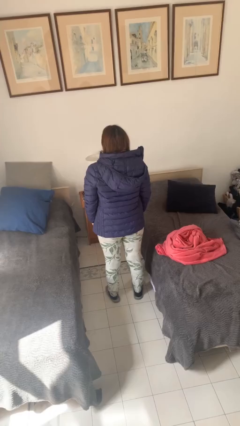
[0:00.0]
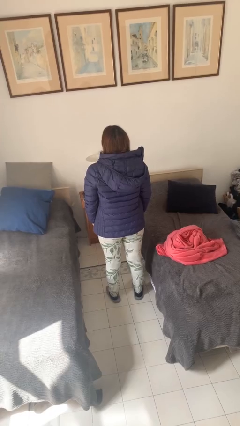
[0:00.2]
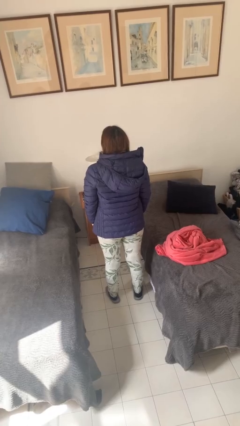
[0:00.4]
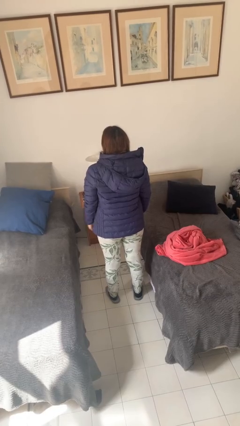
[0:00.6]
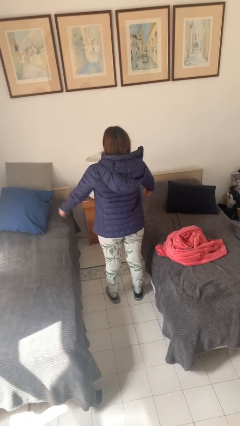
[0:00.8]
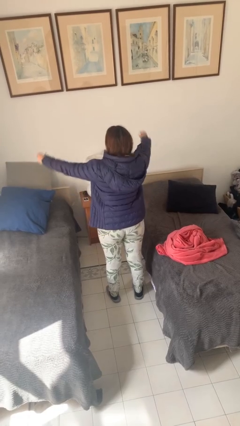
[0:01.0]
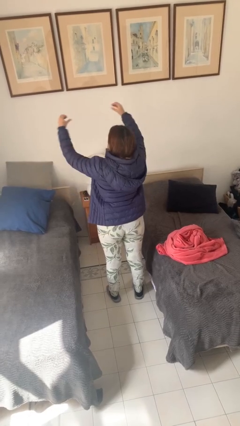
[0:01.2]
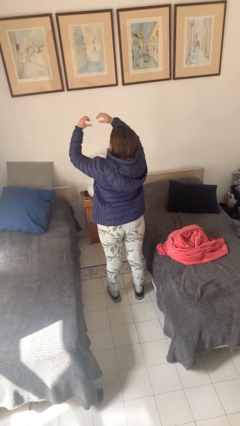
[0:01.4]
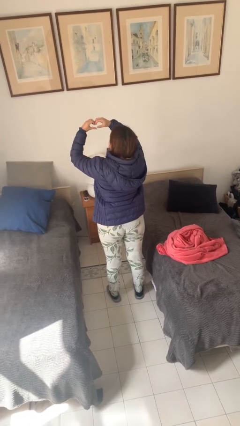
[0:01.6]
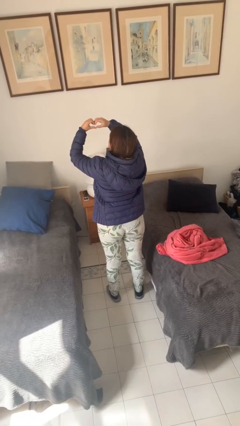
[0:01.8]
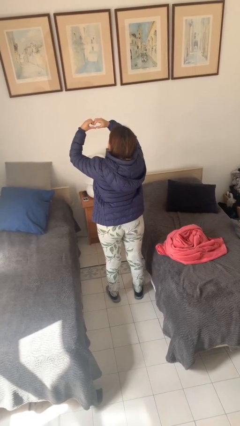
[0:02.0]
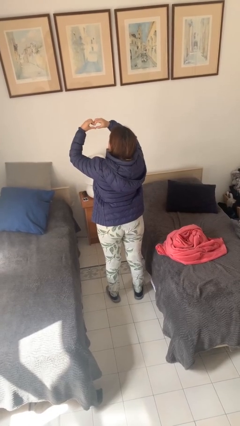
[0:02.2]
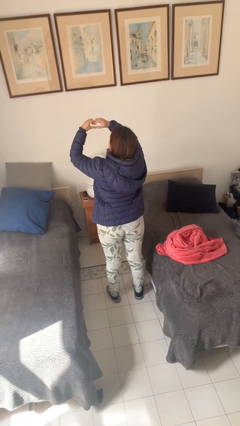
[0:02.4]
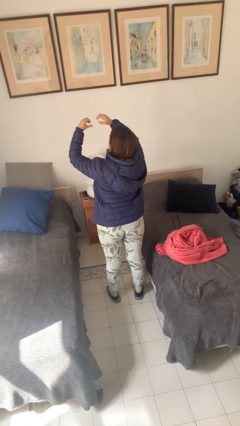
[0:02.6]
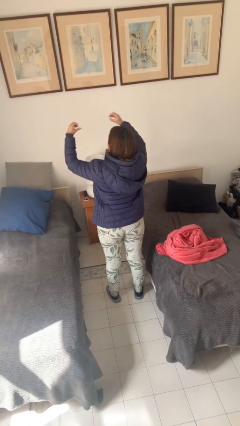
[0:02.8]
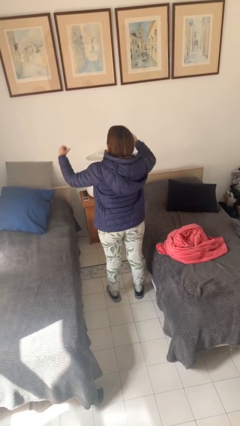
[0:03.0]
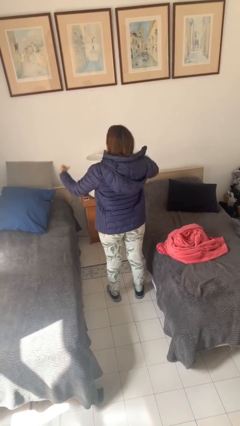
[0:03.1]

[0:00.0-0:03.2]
person gestures heart

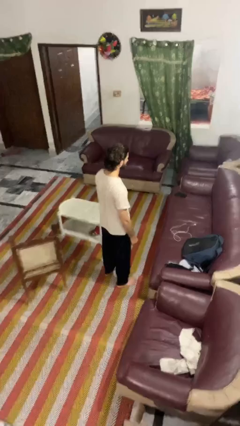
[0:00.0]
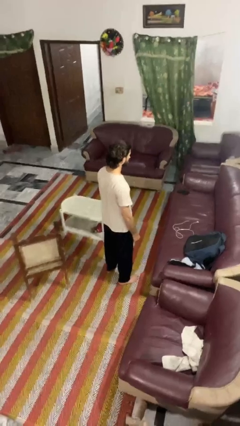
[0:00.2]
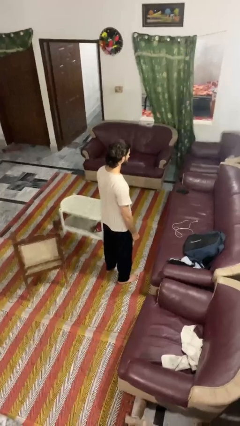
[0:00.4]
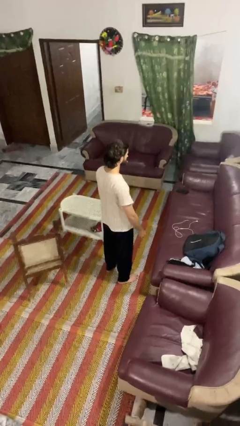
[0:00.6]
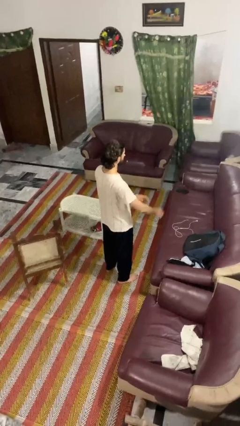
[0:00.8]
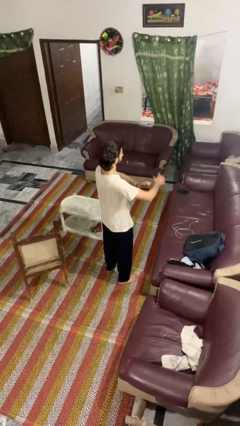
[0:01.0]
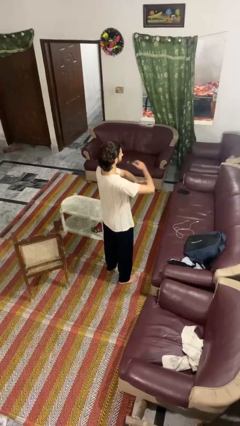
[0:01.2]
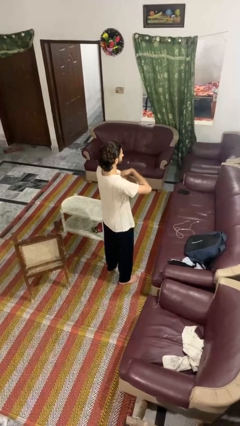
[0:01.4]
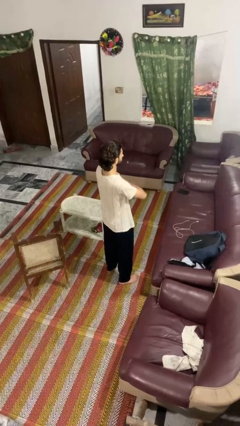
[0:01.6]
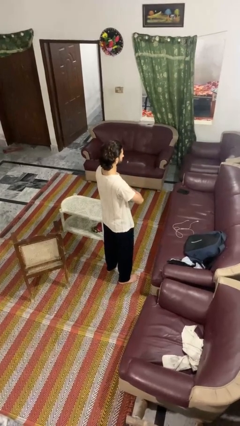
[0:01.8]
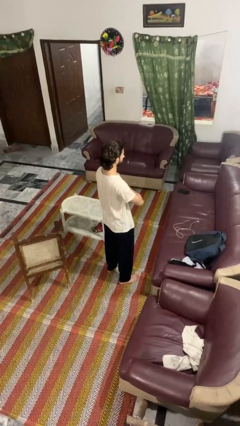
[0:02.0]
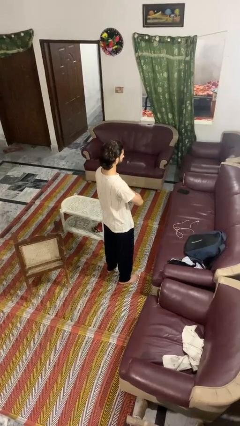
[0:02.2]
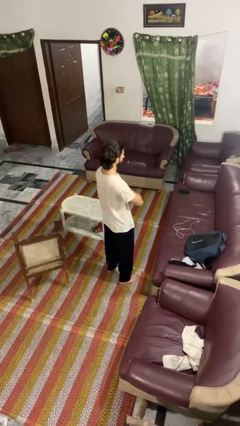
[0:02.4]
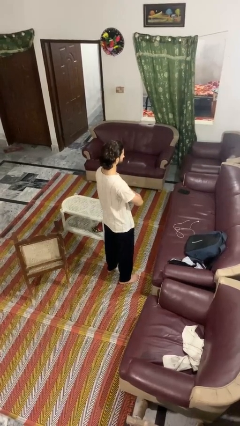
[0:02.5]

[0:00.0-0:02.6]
person crosses arms

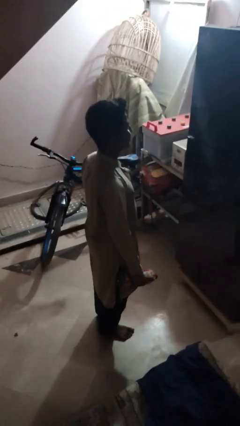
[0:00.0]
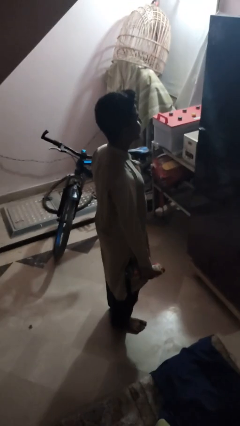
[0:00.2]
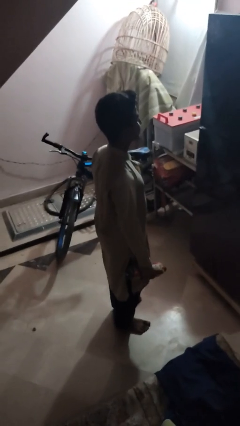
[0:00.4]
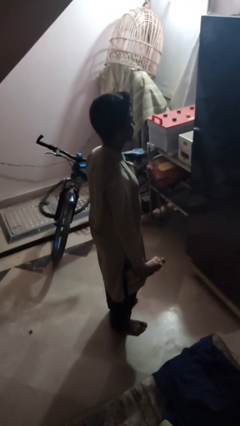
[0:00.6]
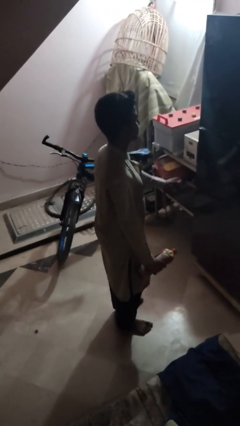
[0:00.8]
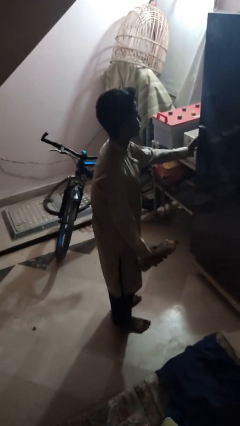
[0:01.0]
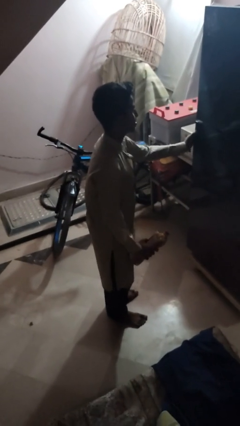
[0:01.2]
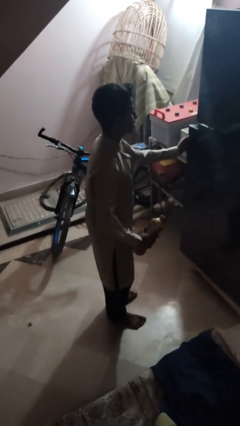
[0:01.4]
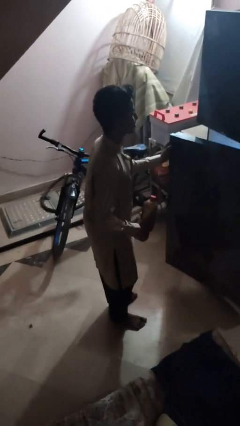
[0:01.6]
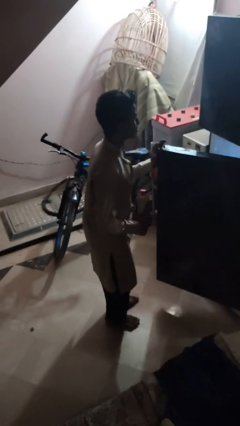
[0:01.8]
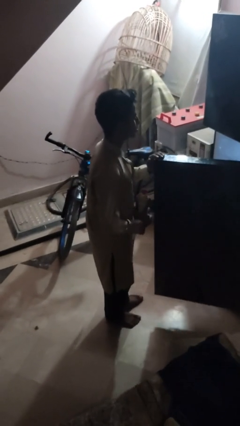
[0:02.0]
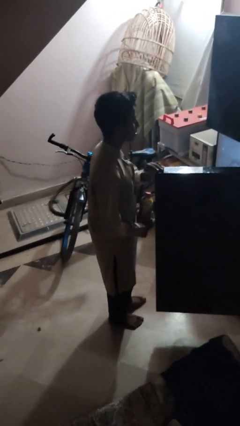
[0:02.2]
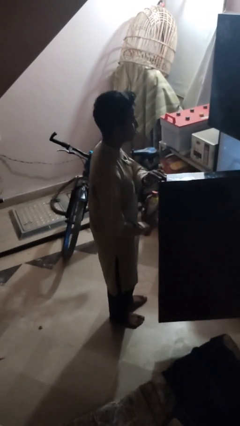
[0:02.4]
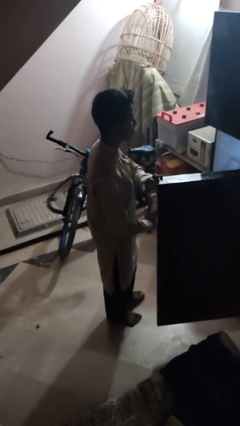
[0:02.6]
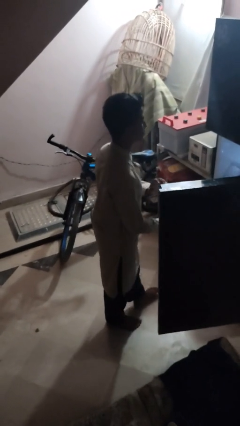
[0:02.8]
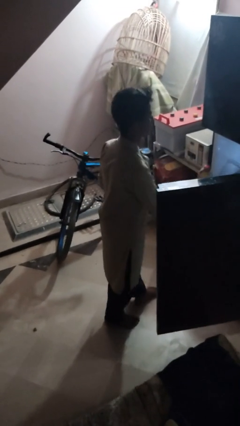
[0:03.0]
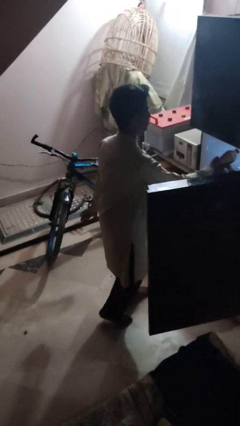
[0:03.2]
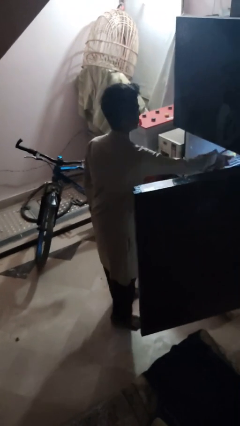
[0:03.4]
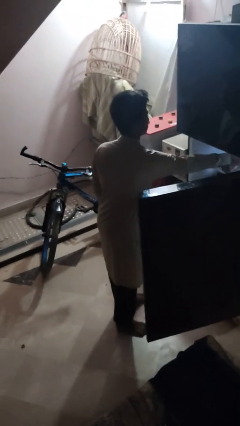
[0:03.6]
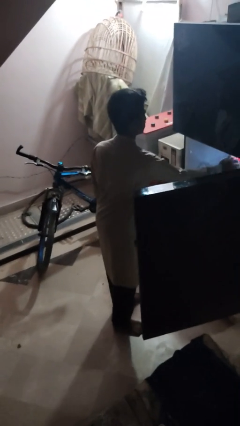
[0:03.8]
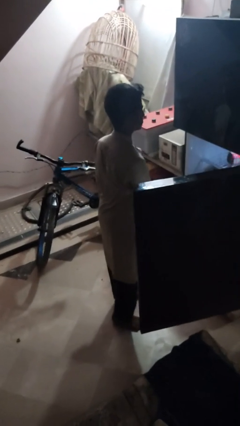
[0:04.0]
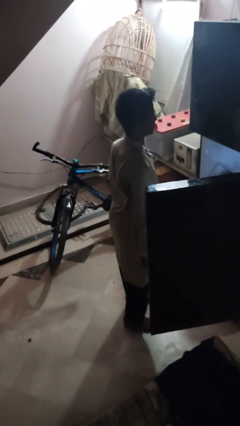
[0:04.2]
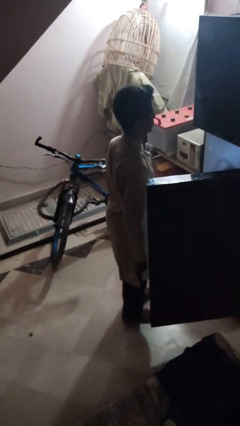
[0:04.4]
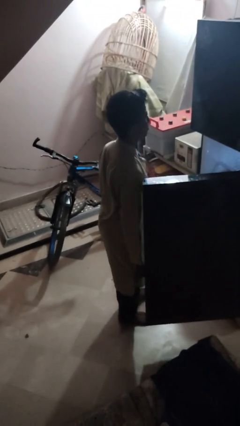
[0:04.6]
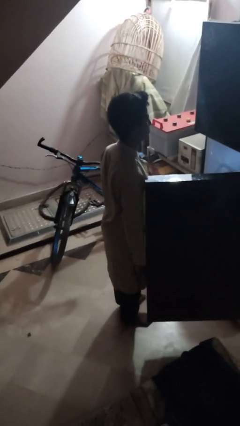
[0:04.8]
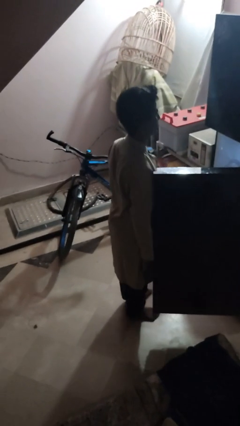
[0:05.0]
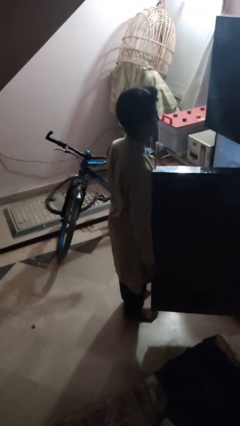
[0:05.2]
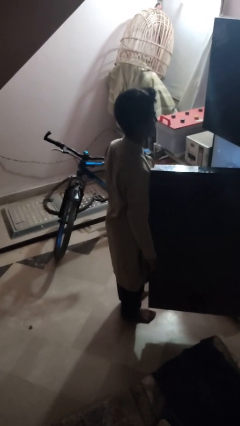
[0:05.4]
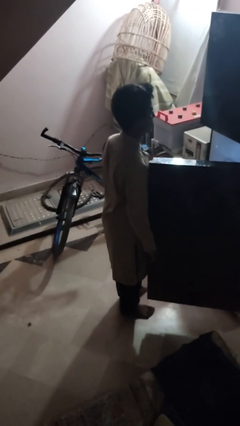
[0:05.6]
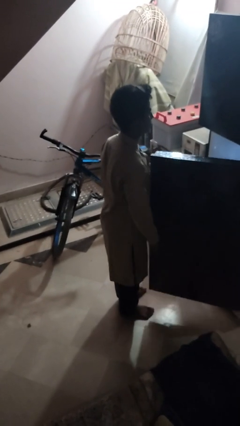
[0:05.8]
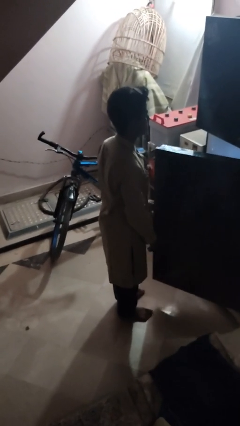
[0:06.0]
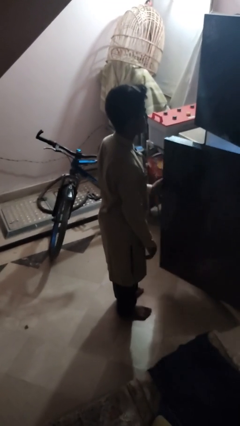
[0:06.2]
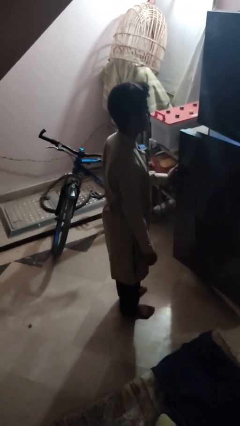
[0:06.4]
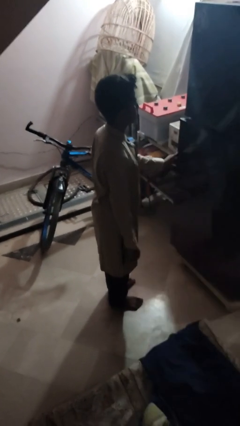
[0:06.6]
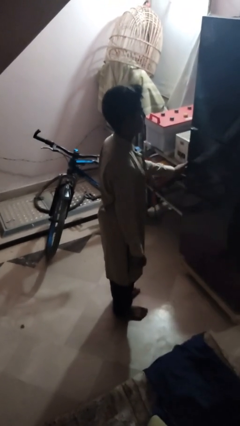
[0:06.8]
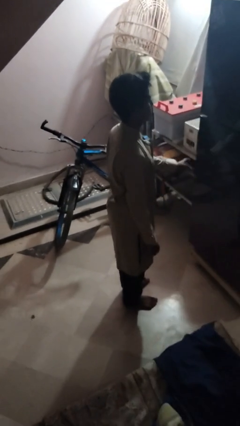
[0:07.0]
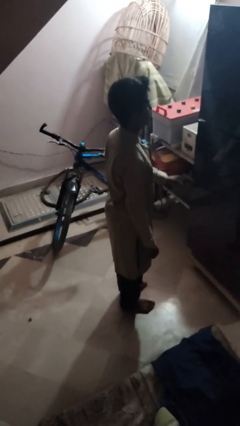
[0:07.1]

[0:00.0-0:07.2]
person puts object into refrigerator

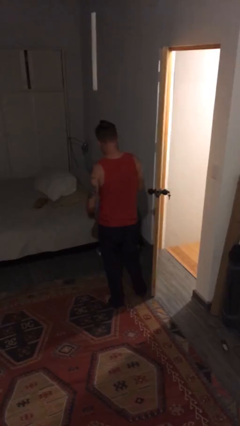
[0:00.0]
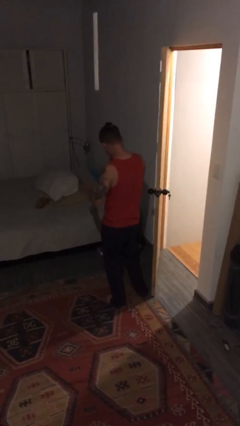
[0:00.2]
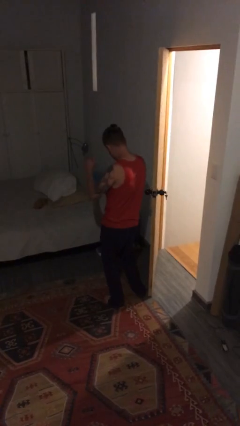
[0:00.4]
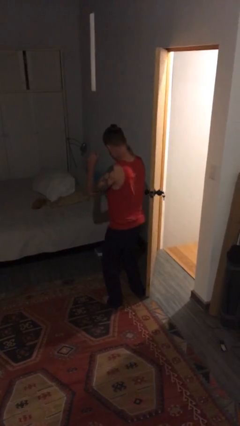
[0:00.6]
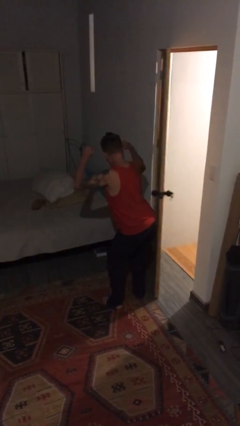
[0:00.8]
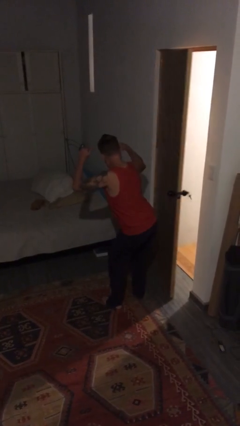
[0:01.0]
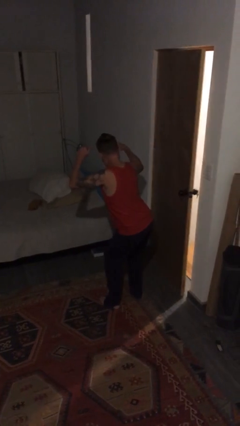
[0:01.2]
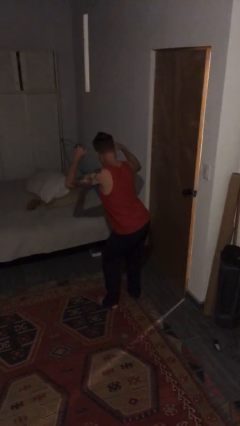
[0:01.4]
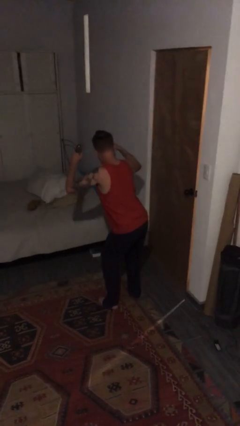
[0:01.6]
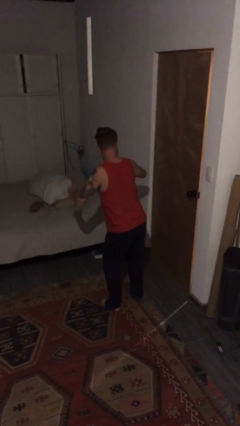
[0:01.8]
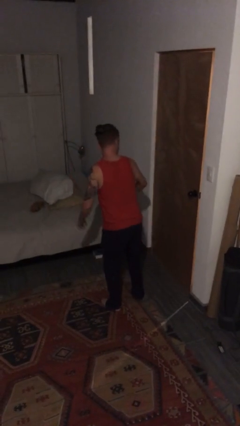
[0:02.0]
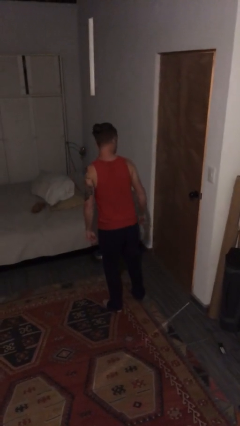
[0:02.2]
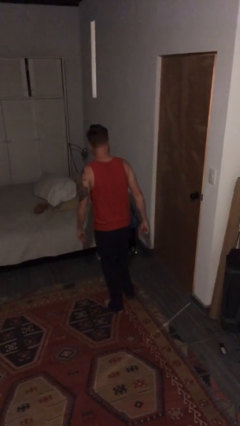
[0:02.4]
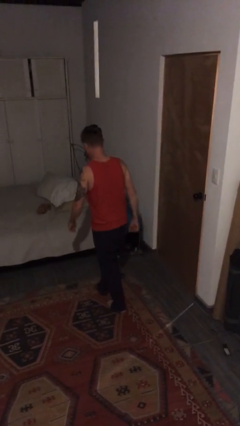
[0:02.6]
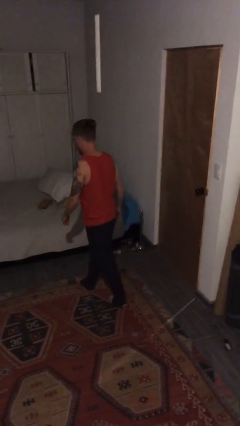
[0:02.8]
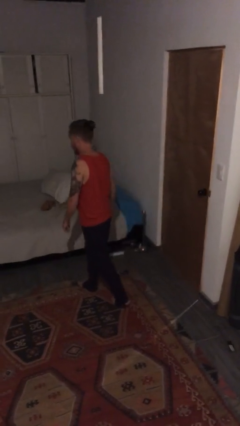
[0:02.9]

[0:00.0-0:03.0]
person closes door with hip

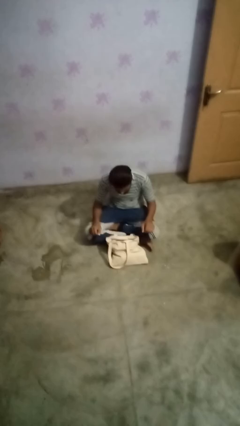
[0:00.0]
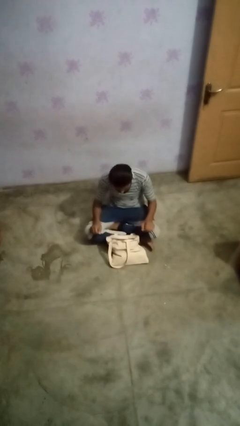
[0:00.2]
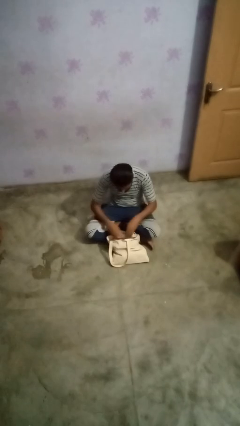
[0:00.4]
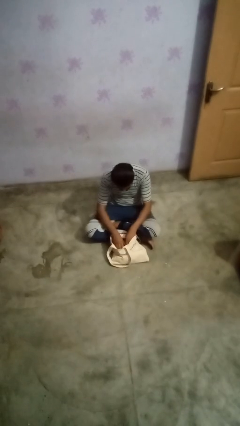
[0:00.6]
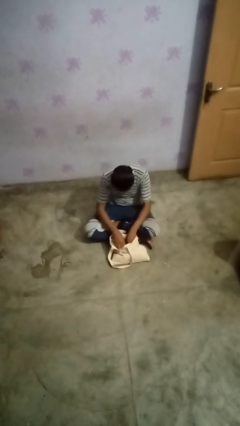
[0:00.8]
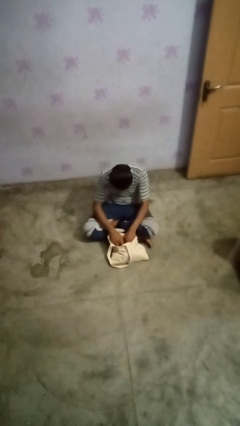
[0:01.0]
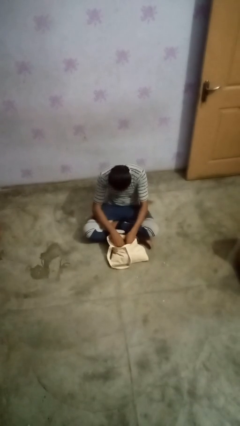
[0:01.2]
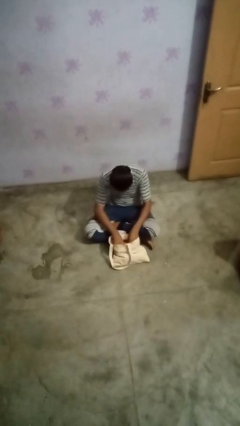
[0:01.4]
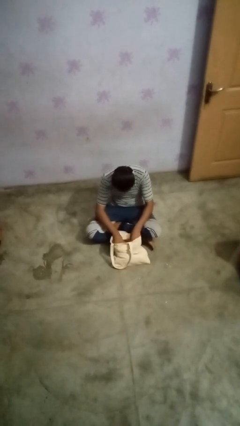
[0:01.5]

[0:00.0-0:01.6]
person searches in bag
